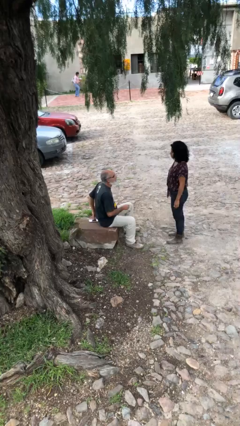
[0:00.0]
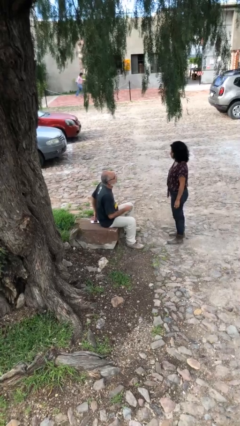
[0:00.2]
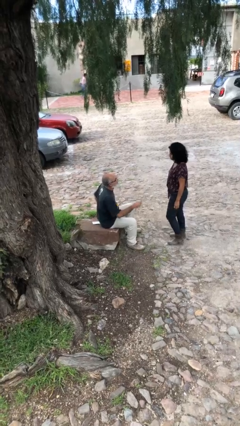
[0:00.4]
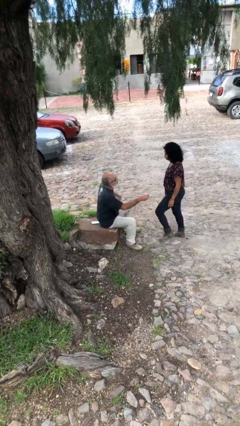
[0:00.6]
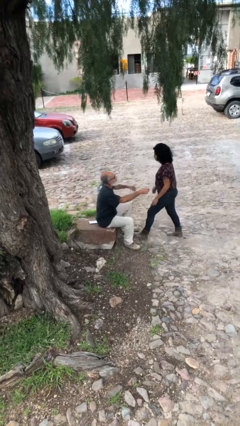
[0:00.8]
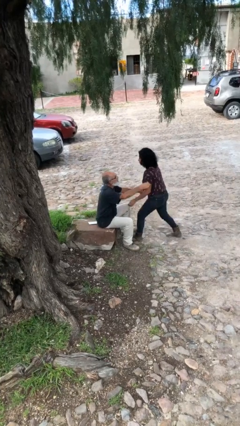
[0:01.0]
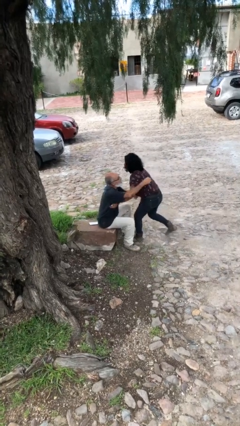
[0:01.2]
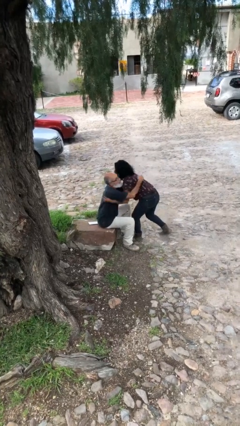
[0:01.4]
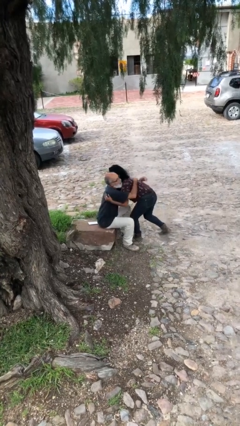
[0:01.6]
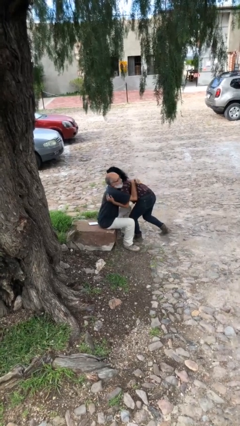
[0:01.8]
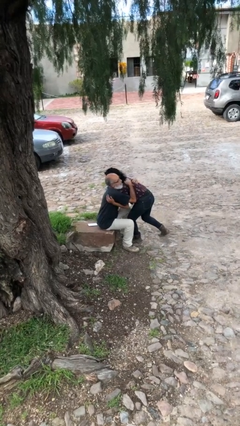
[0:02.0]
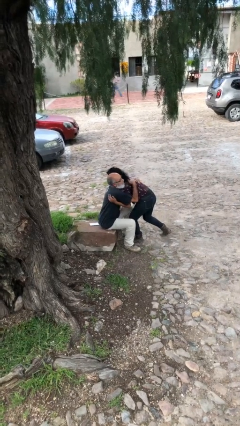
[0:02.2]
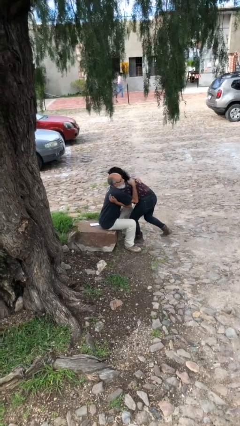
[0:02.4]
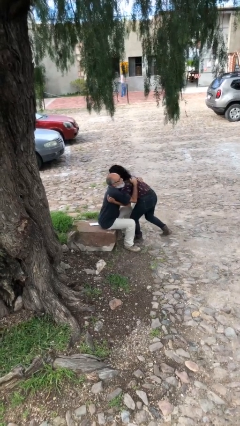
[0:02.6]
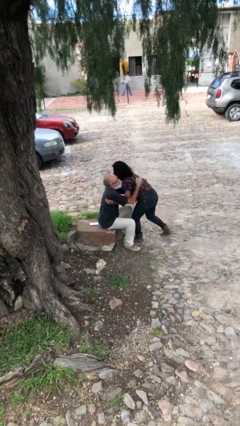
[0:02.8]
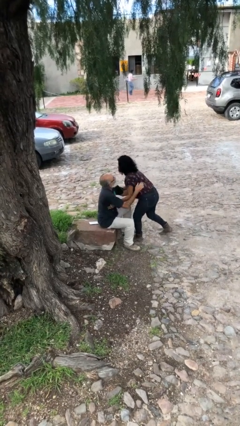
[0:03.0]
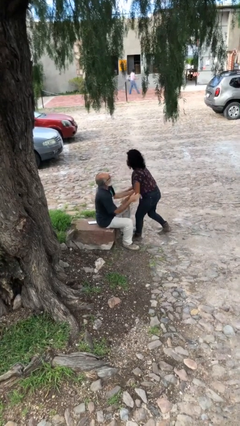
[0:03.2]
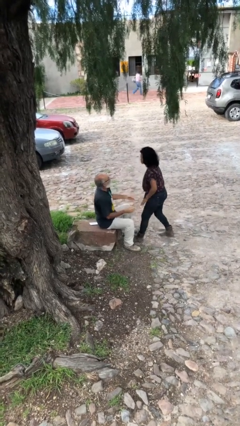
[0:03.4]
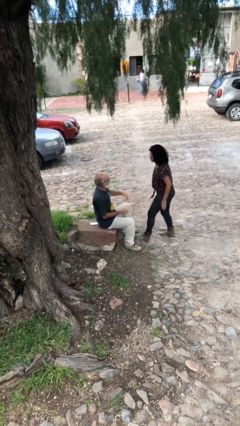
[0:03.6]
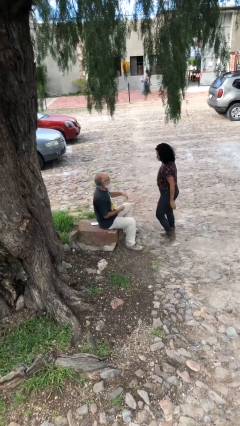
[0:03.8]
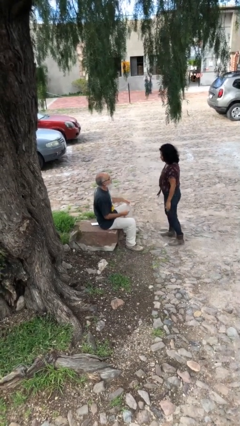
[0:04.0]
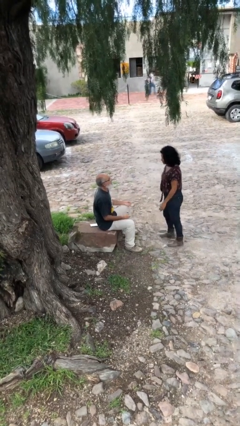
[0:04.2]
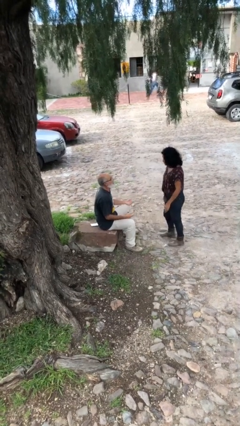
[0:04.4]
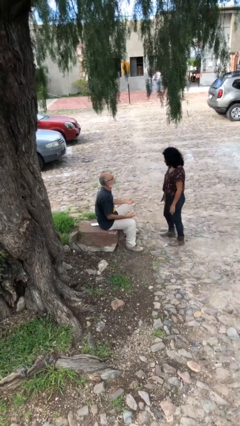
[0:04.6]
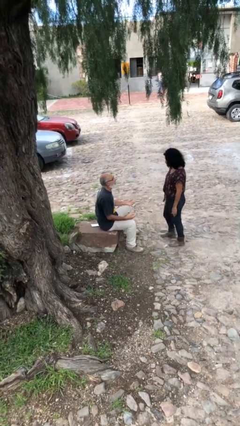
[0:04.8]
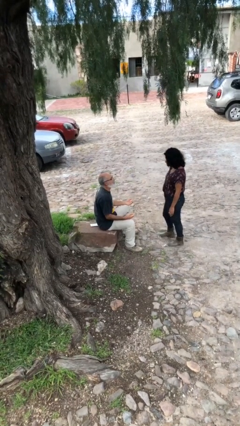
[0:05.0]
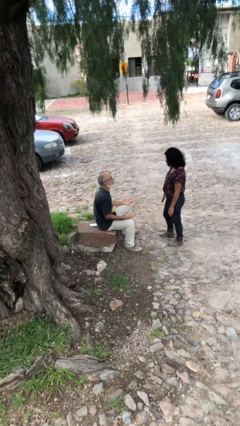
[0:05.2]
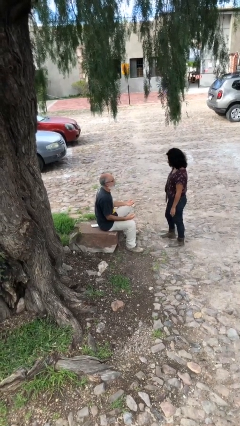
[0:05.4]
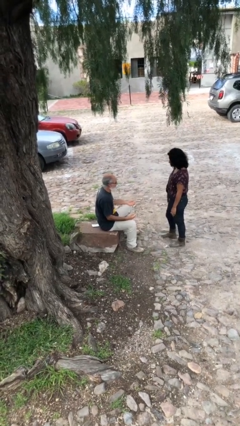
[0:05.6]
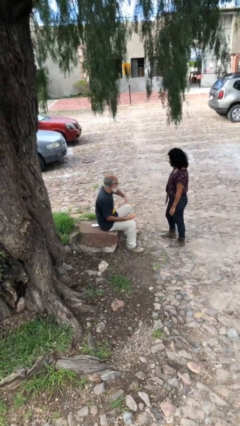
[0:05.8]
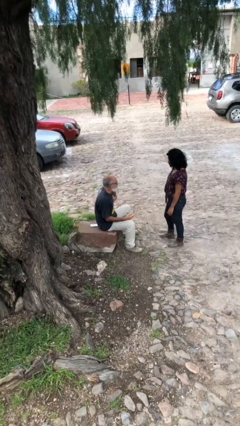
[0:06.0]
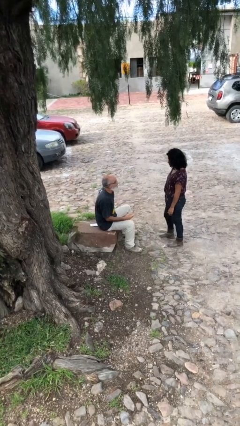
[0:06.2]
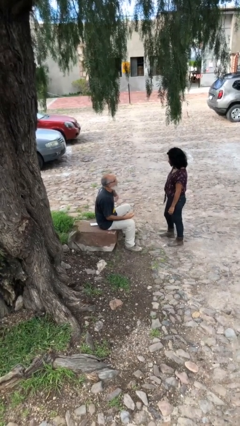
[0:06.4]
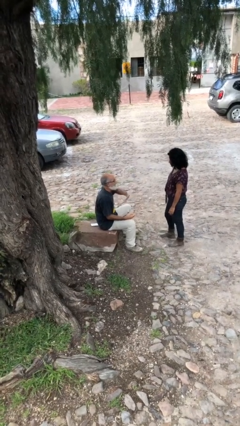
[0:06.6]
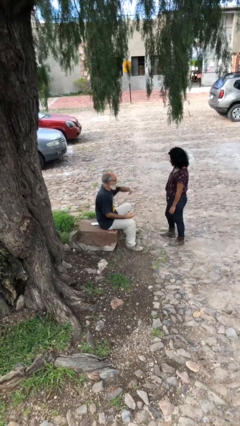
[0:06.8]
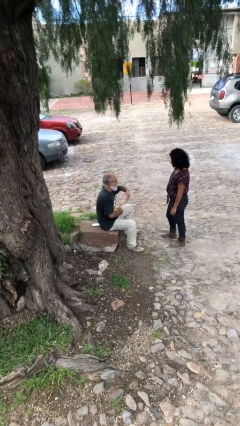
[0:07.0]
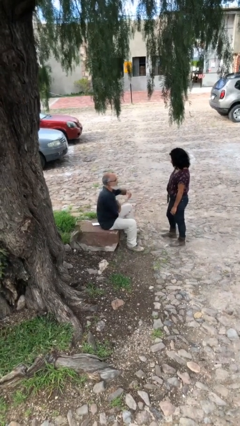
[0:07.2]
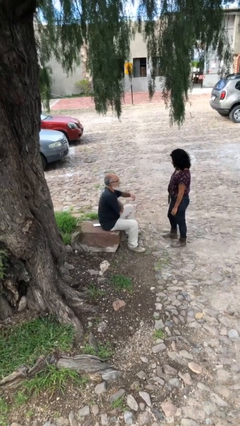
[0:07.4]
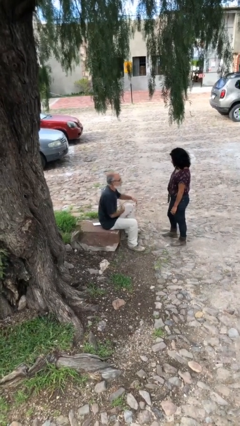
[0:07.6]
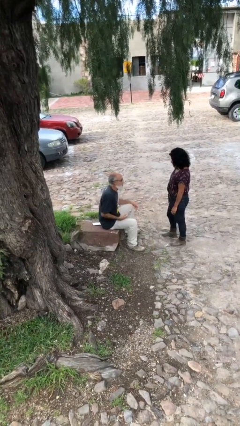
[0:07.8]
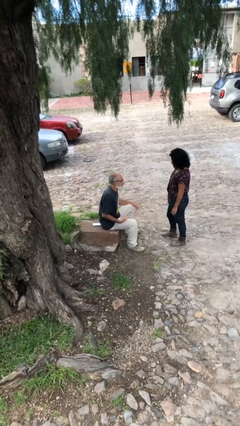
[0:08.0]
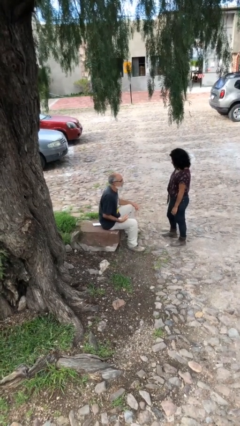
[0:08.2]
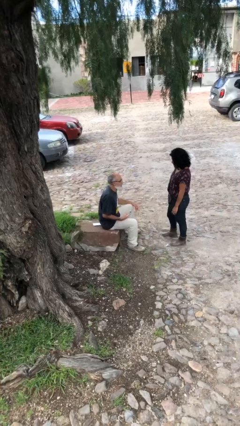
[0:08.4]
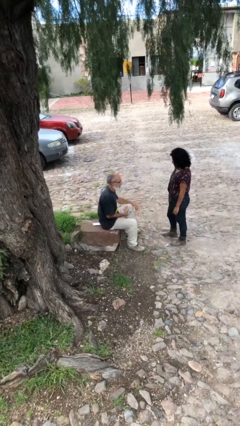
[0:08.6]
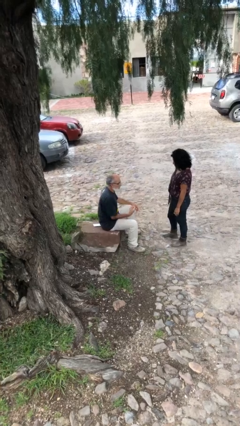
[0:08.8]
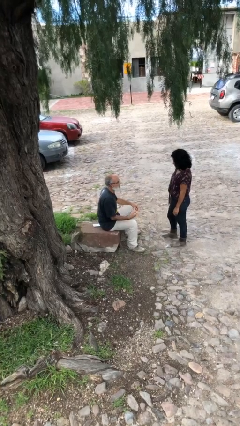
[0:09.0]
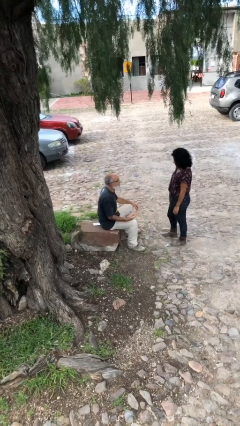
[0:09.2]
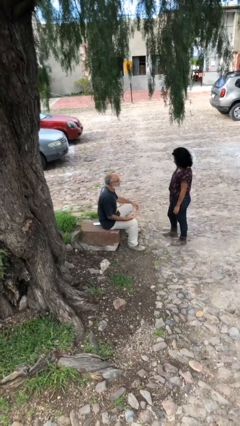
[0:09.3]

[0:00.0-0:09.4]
person embraces person

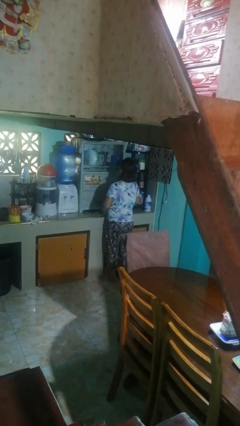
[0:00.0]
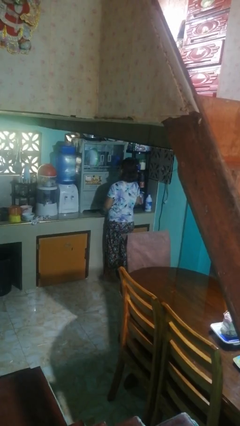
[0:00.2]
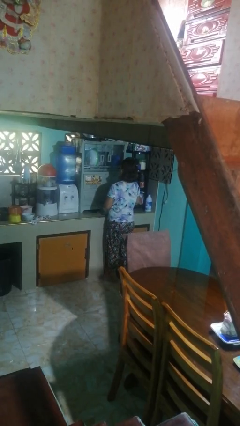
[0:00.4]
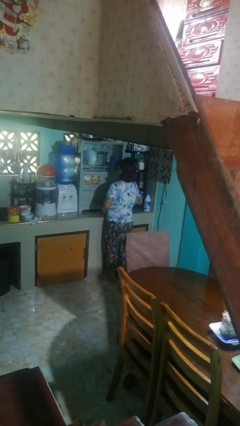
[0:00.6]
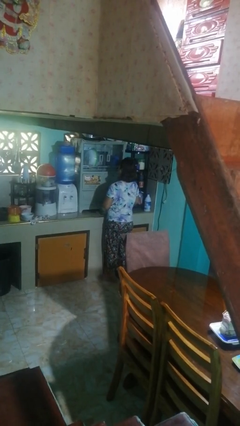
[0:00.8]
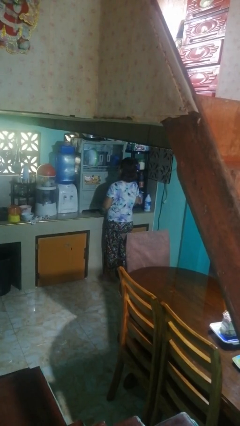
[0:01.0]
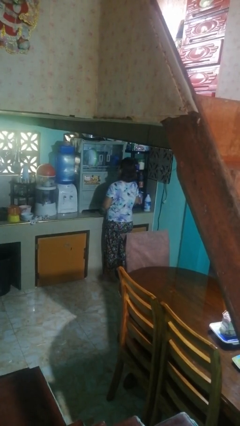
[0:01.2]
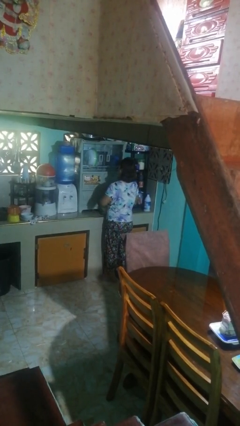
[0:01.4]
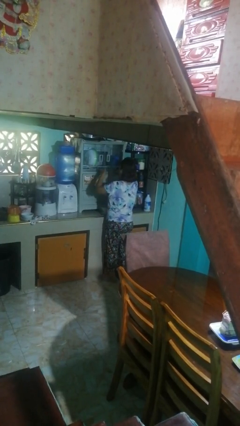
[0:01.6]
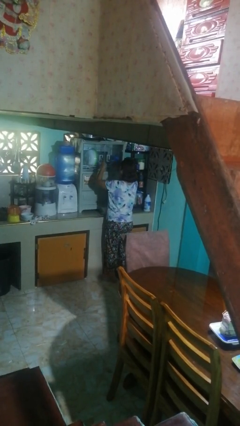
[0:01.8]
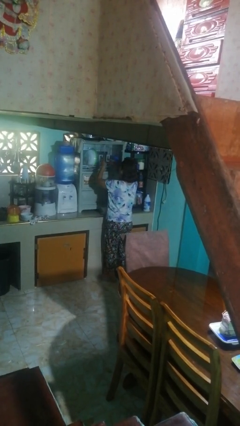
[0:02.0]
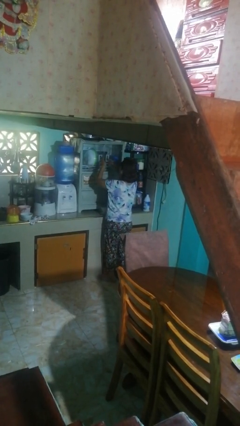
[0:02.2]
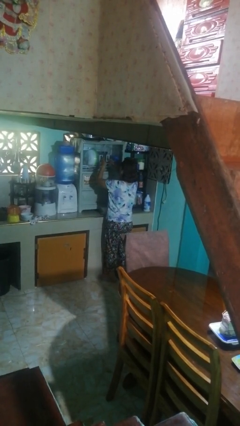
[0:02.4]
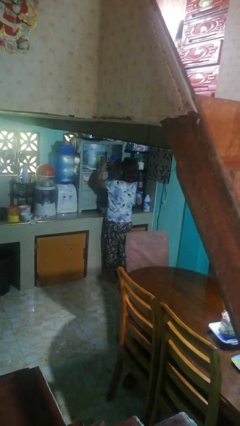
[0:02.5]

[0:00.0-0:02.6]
person closes curtains

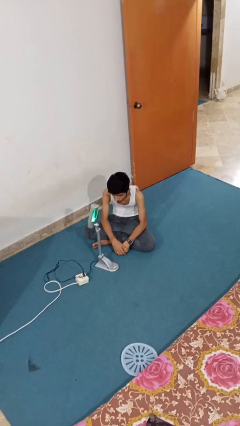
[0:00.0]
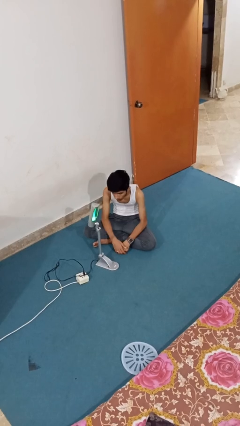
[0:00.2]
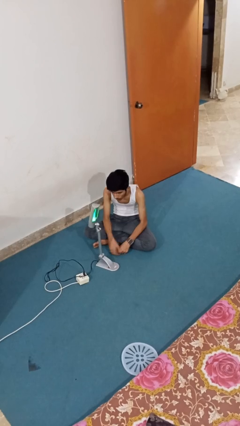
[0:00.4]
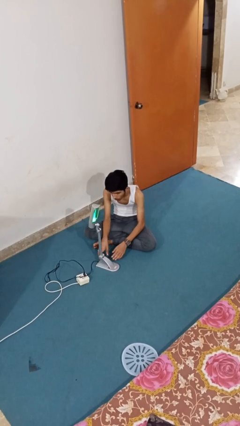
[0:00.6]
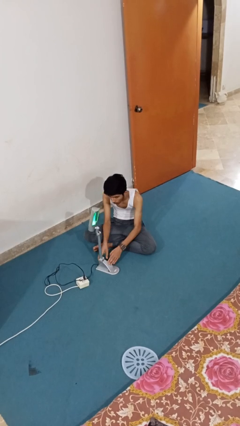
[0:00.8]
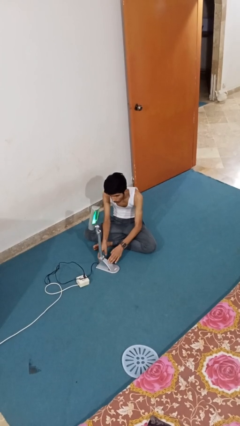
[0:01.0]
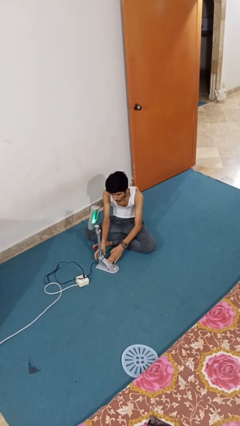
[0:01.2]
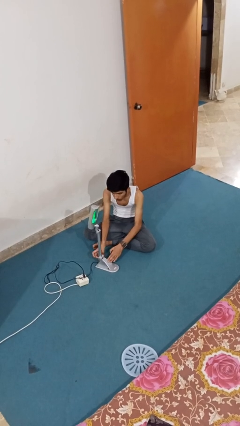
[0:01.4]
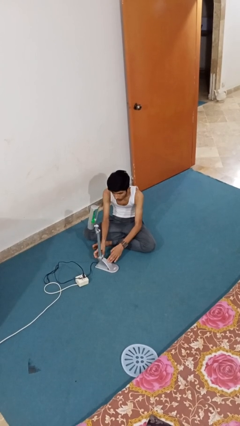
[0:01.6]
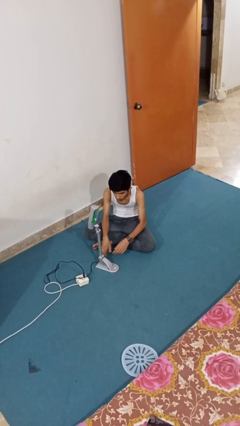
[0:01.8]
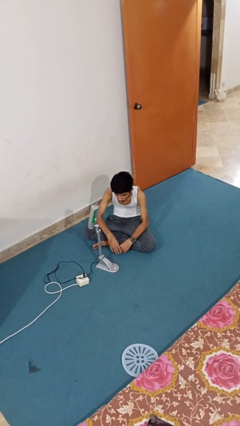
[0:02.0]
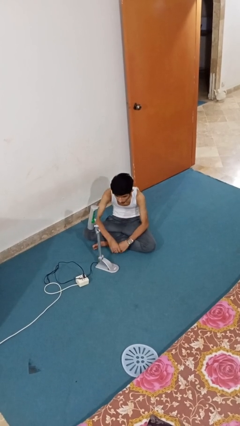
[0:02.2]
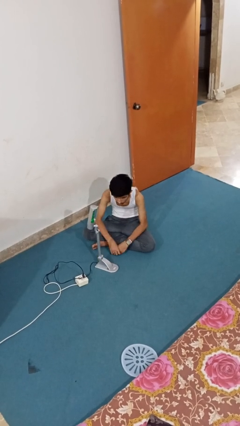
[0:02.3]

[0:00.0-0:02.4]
person turns off lamp

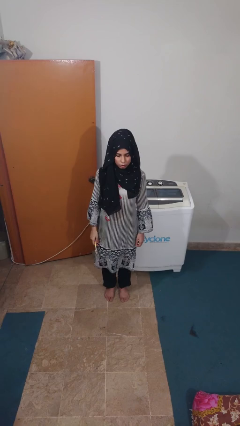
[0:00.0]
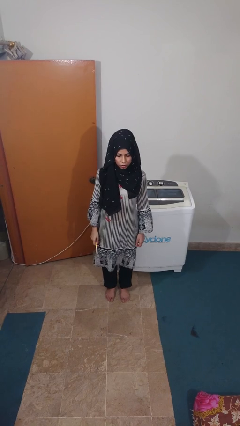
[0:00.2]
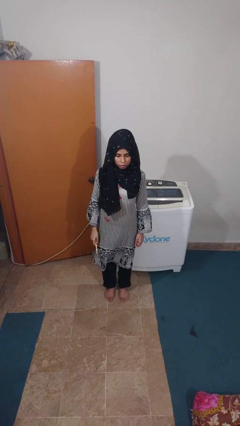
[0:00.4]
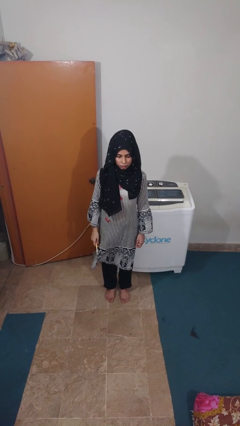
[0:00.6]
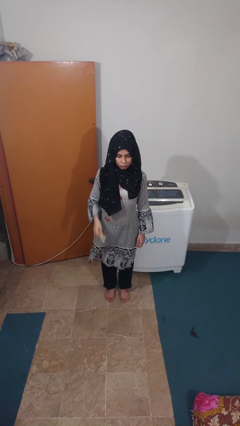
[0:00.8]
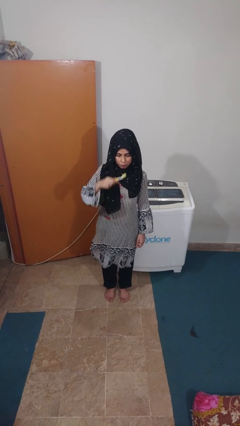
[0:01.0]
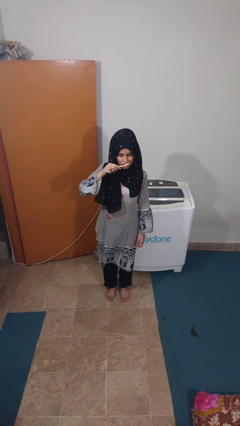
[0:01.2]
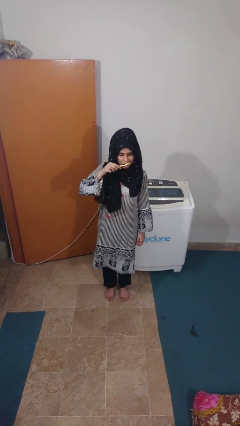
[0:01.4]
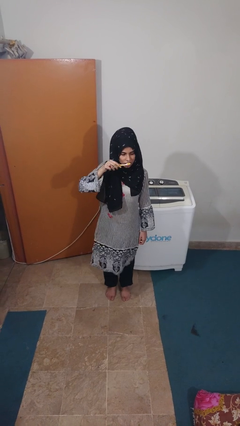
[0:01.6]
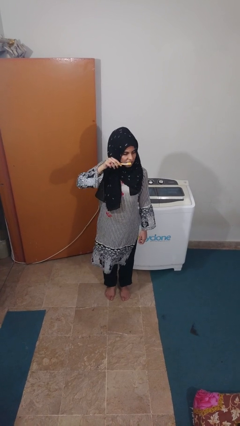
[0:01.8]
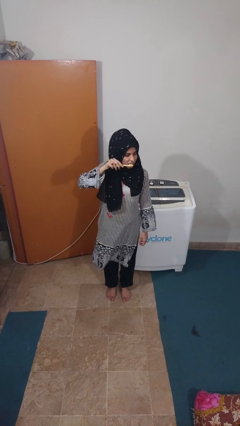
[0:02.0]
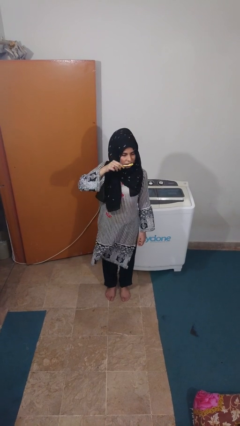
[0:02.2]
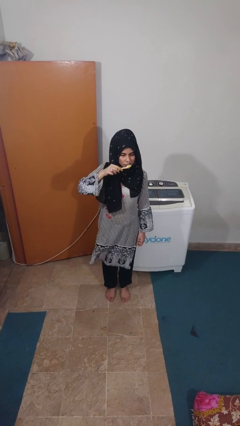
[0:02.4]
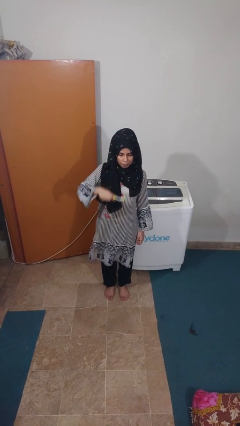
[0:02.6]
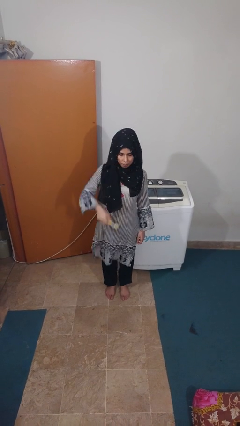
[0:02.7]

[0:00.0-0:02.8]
person brushes teeth

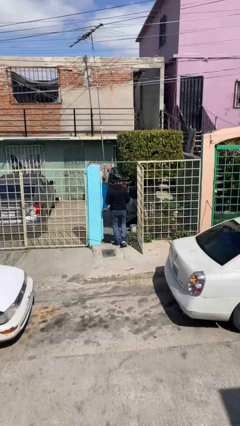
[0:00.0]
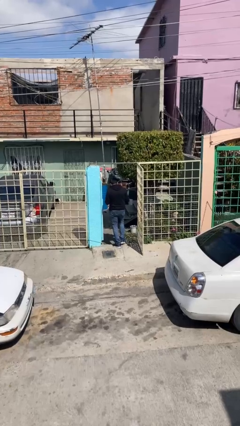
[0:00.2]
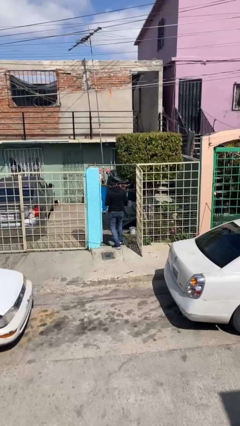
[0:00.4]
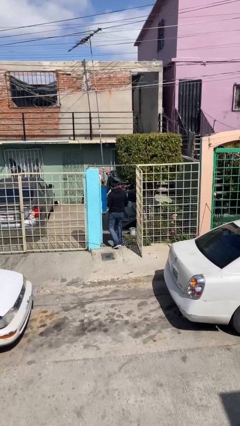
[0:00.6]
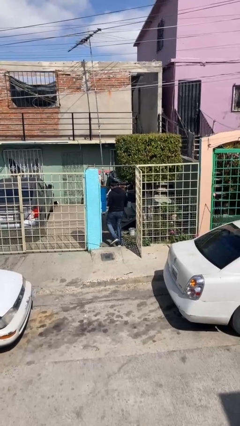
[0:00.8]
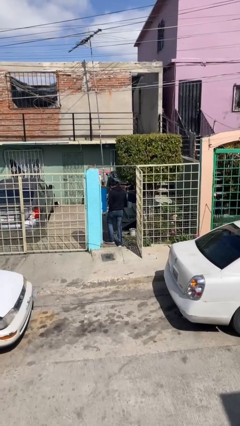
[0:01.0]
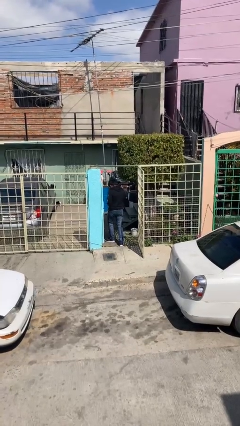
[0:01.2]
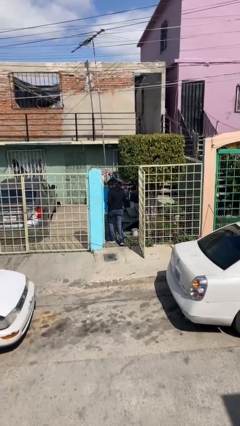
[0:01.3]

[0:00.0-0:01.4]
person exits scene through structure
